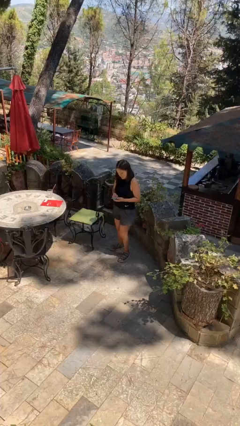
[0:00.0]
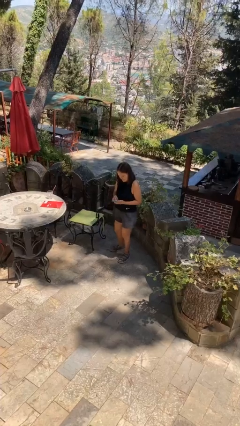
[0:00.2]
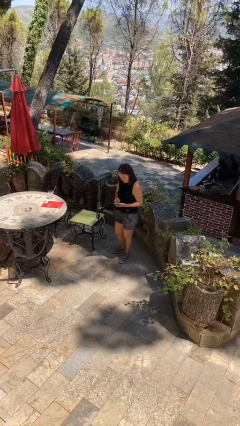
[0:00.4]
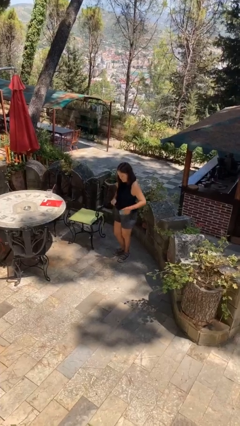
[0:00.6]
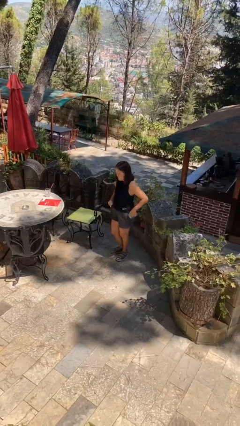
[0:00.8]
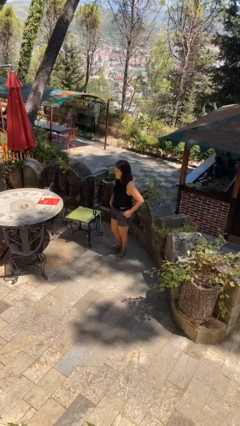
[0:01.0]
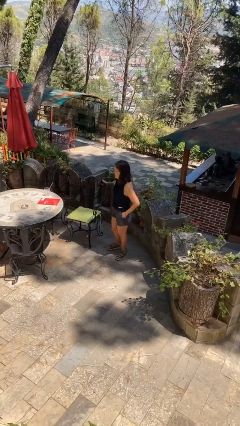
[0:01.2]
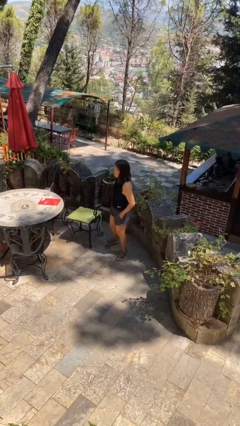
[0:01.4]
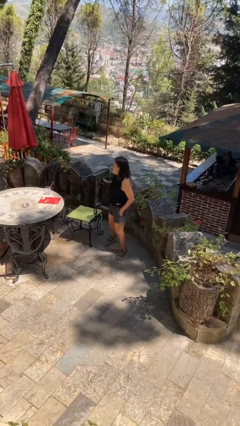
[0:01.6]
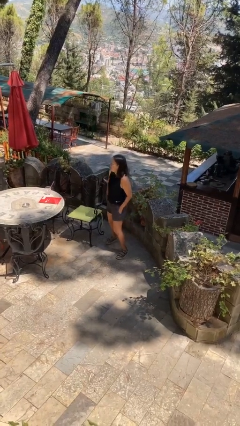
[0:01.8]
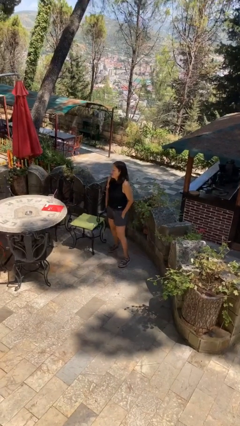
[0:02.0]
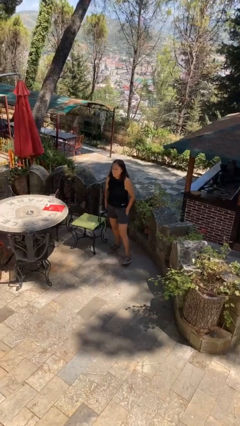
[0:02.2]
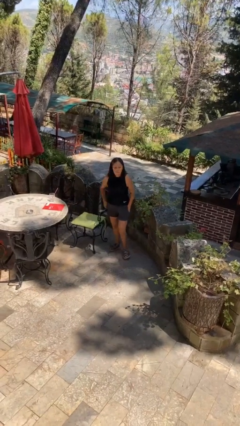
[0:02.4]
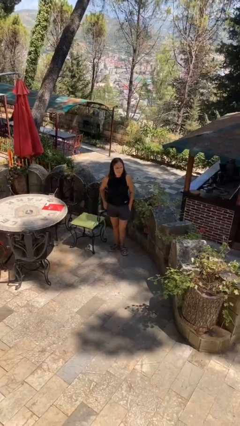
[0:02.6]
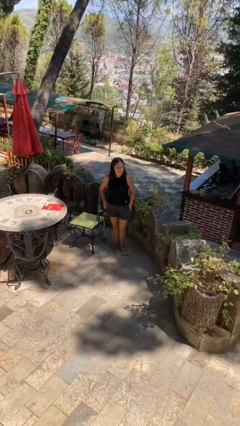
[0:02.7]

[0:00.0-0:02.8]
person puts phone into pocket

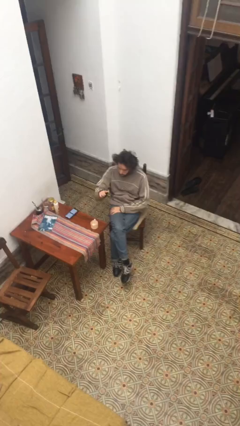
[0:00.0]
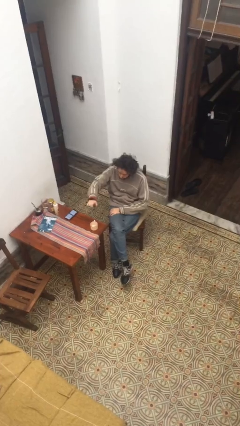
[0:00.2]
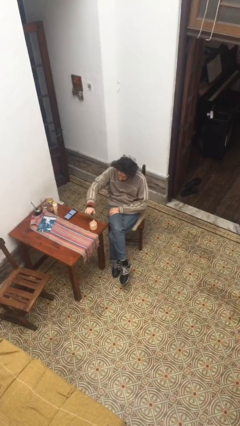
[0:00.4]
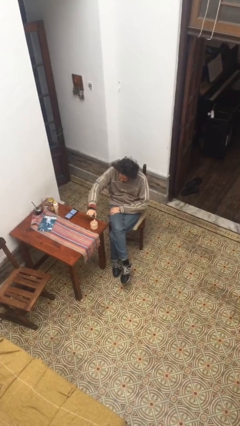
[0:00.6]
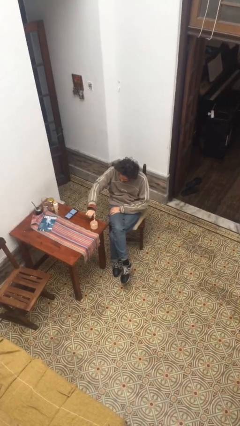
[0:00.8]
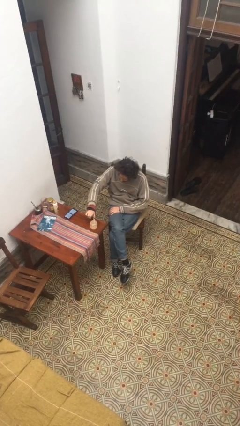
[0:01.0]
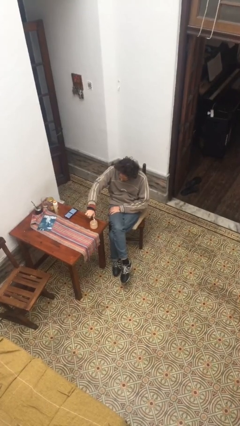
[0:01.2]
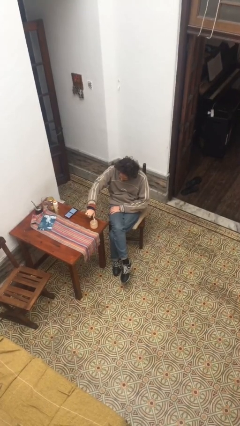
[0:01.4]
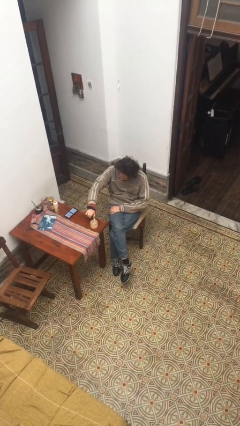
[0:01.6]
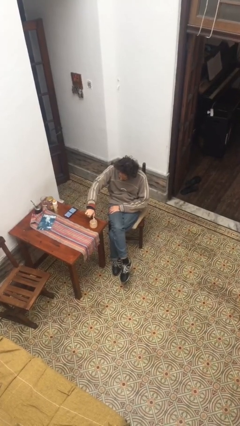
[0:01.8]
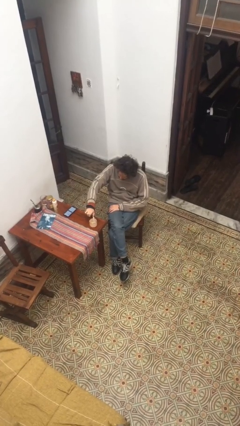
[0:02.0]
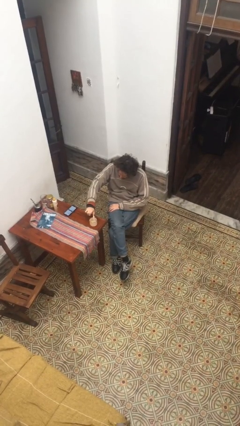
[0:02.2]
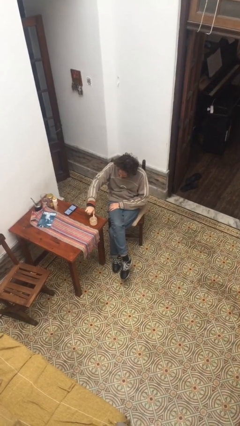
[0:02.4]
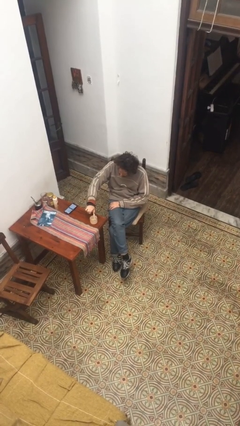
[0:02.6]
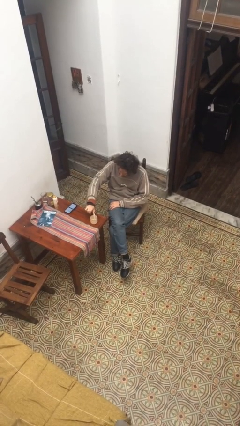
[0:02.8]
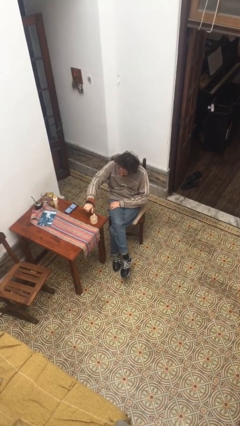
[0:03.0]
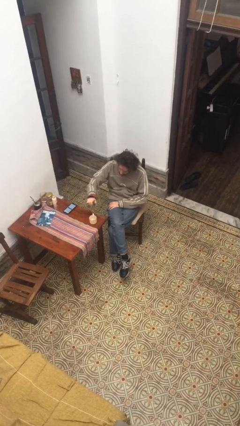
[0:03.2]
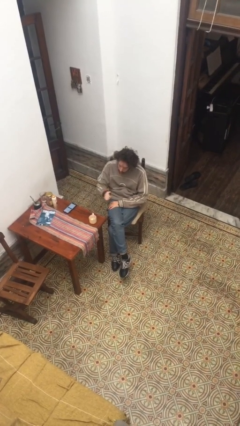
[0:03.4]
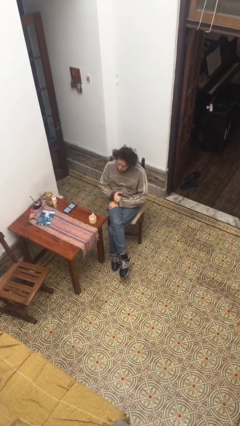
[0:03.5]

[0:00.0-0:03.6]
person lights candle

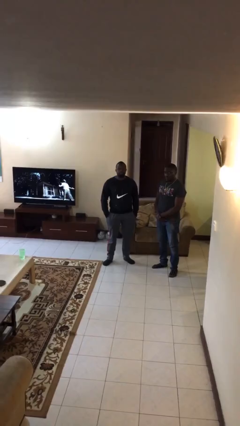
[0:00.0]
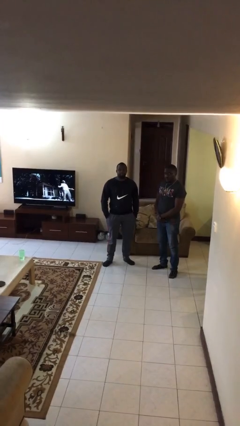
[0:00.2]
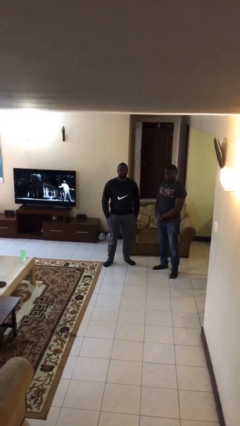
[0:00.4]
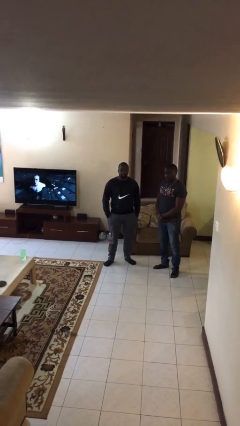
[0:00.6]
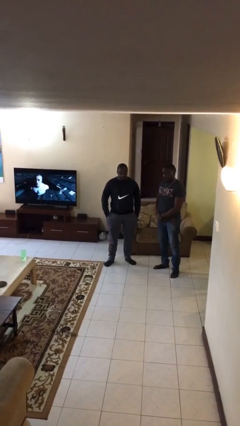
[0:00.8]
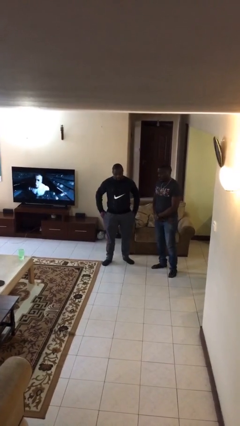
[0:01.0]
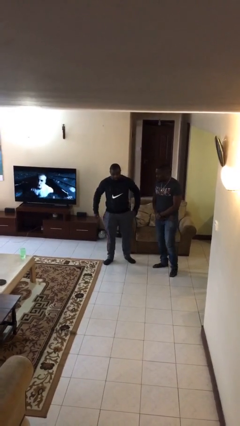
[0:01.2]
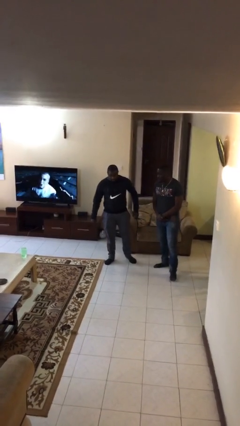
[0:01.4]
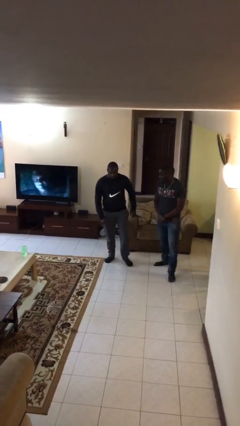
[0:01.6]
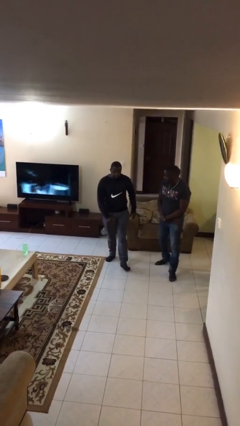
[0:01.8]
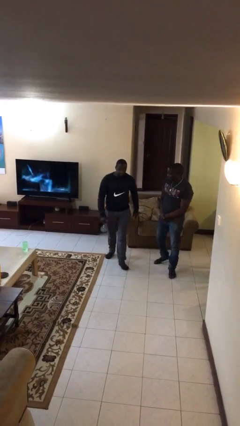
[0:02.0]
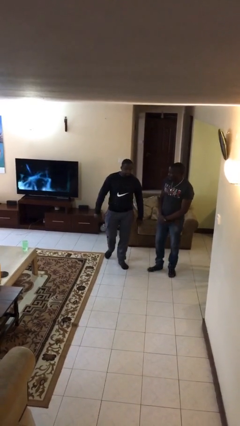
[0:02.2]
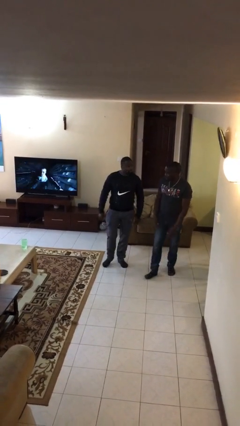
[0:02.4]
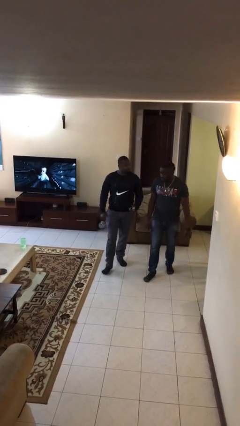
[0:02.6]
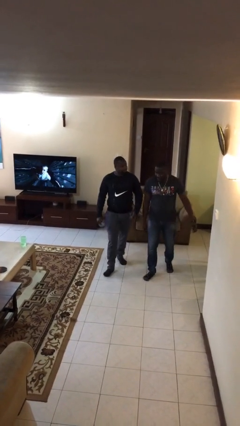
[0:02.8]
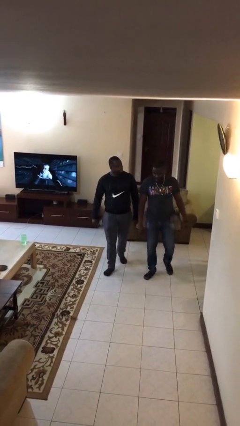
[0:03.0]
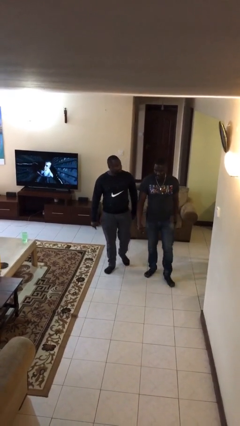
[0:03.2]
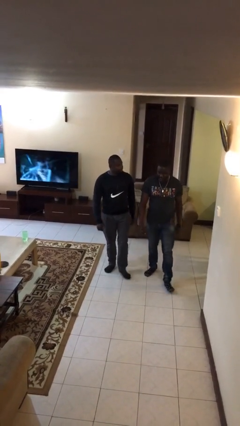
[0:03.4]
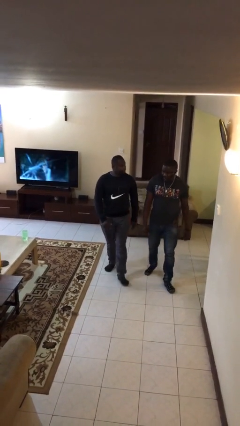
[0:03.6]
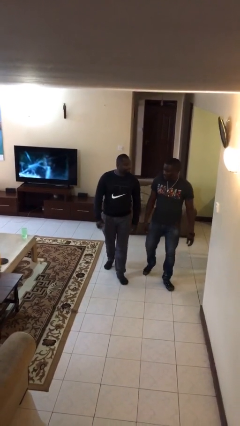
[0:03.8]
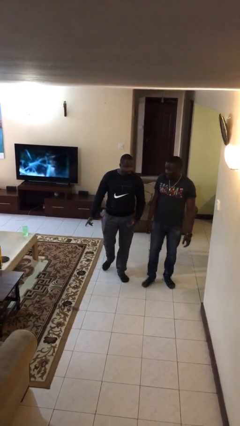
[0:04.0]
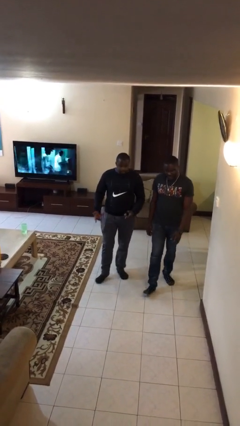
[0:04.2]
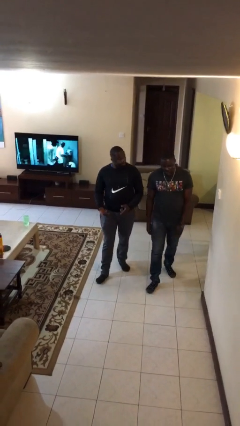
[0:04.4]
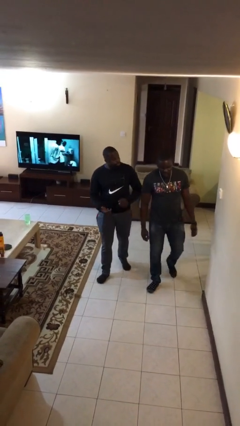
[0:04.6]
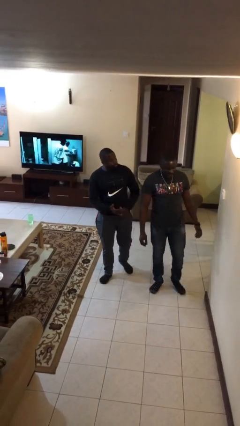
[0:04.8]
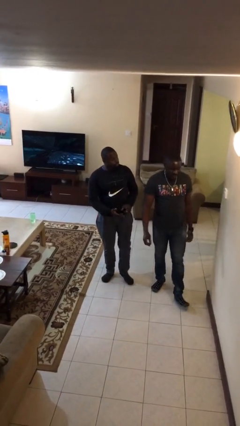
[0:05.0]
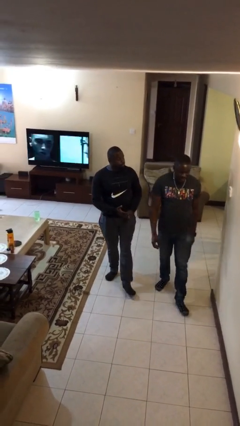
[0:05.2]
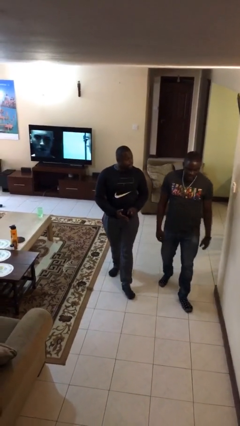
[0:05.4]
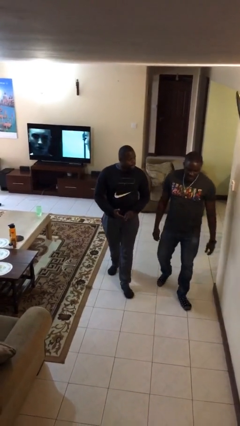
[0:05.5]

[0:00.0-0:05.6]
person talks to person

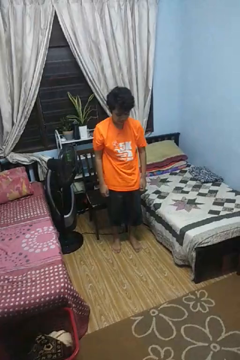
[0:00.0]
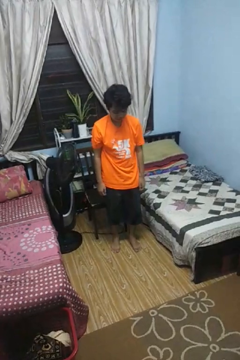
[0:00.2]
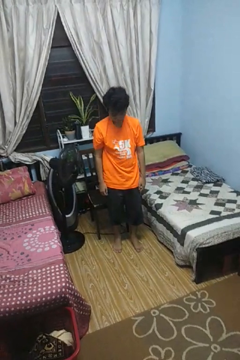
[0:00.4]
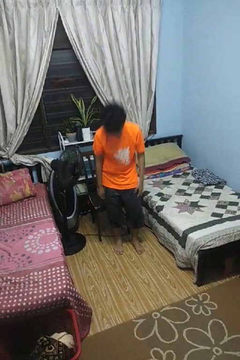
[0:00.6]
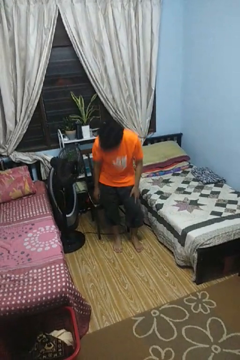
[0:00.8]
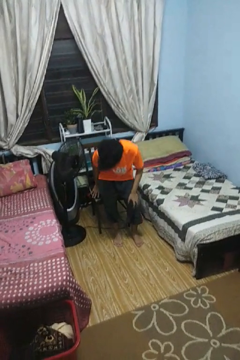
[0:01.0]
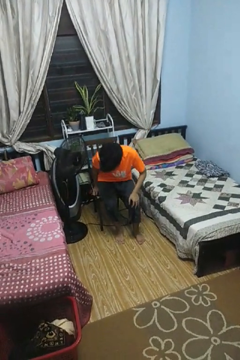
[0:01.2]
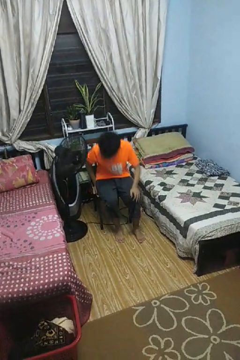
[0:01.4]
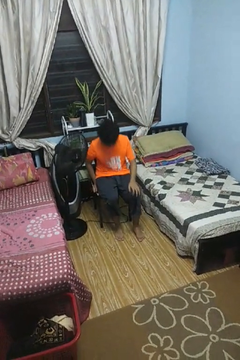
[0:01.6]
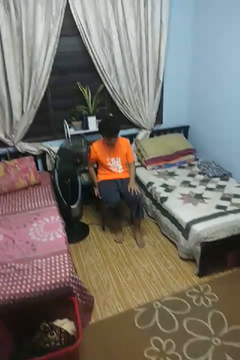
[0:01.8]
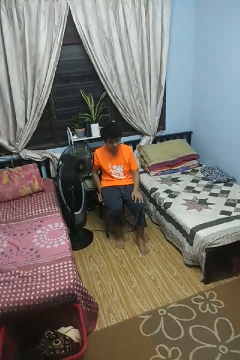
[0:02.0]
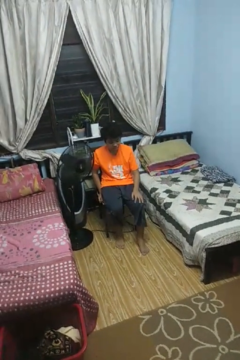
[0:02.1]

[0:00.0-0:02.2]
person sits down

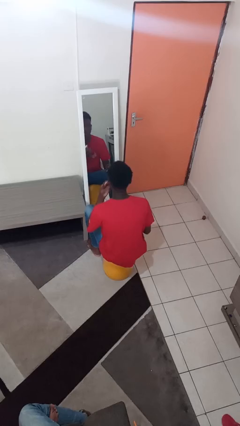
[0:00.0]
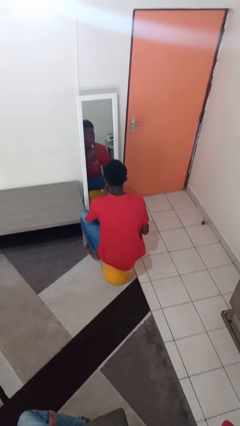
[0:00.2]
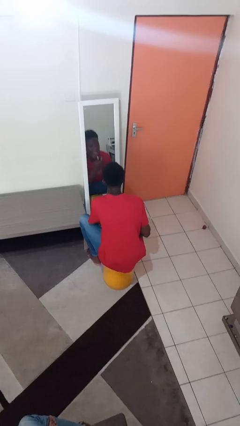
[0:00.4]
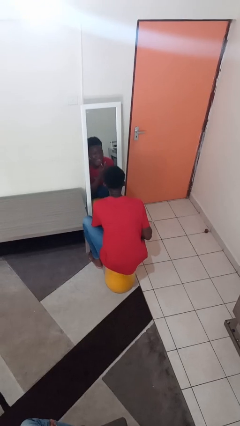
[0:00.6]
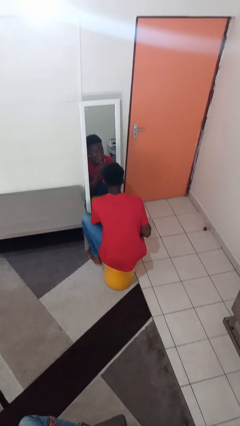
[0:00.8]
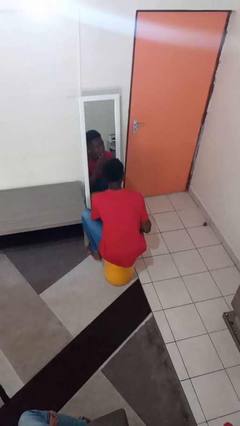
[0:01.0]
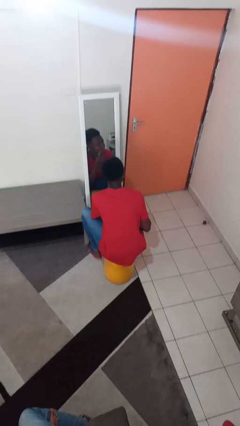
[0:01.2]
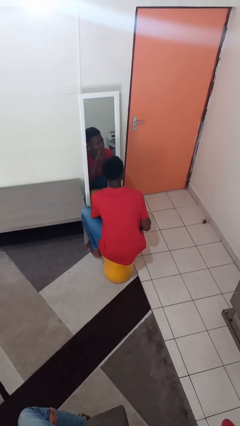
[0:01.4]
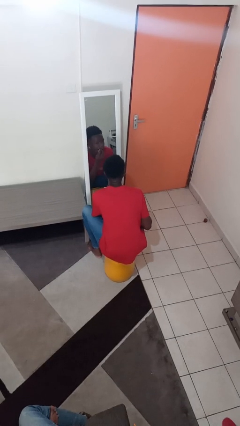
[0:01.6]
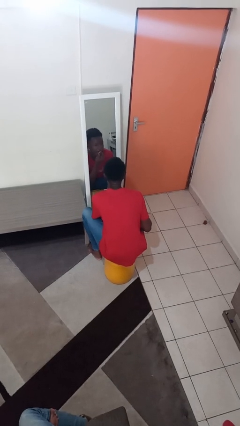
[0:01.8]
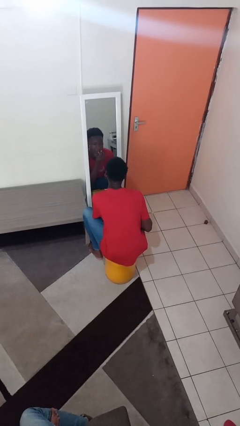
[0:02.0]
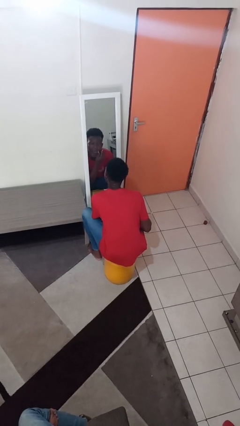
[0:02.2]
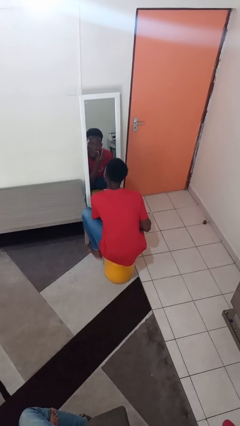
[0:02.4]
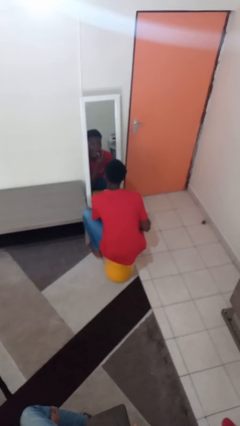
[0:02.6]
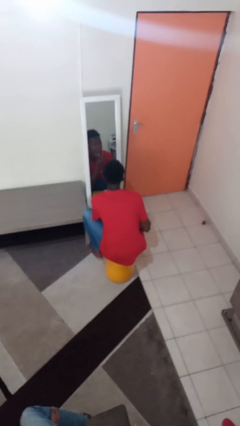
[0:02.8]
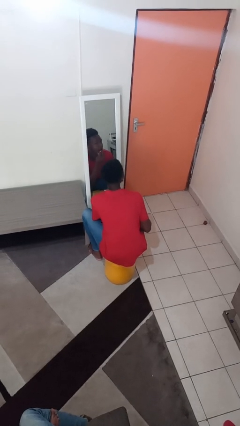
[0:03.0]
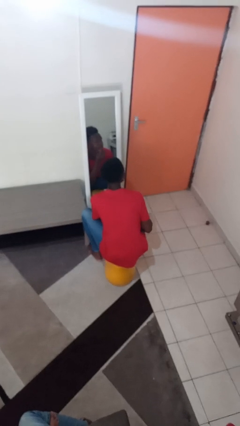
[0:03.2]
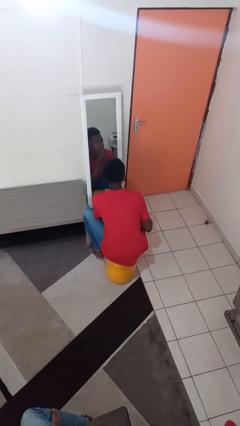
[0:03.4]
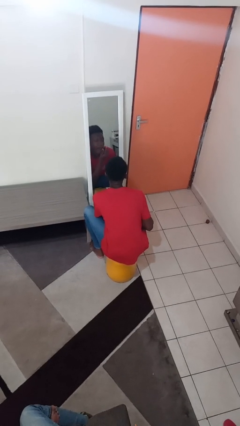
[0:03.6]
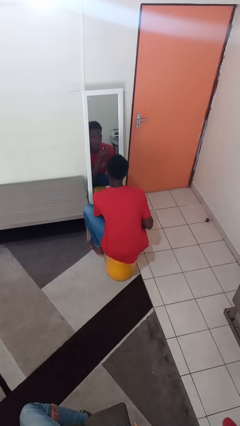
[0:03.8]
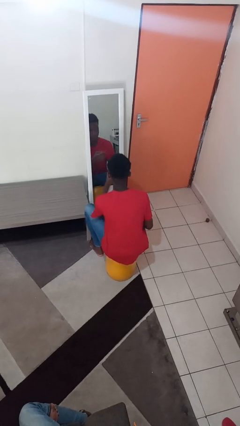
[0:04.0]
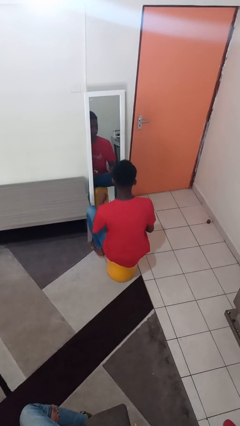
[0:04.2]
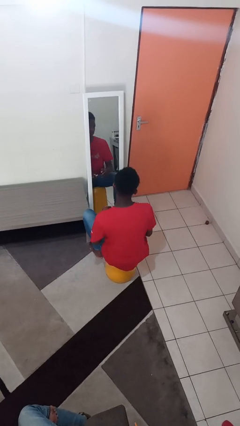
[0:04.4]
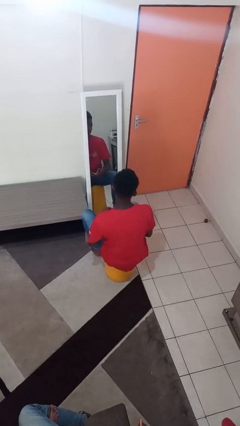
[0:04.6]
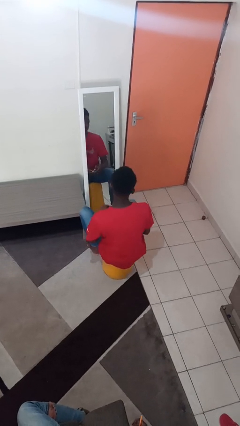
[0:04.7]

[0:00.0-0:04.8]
person applies lip makeup
